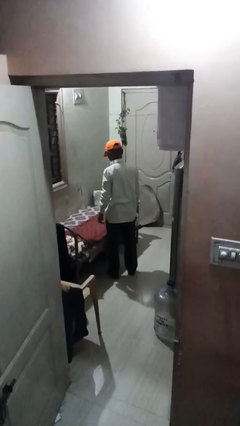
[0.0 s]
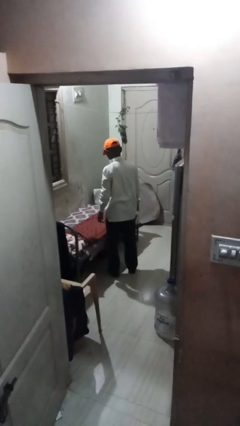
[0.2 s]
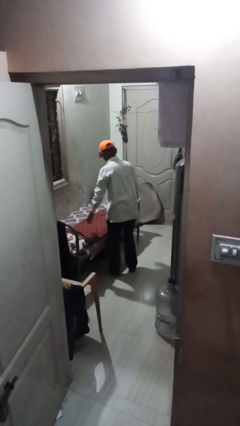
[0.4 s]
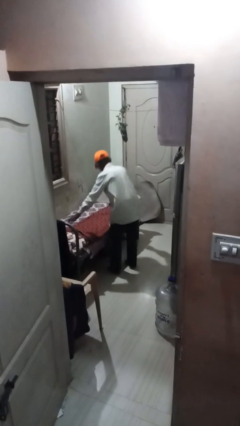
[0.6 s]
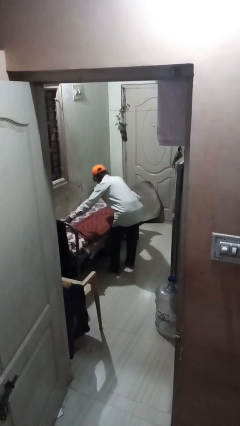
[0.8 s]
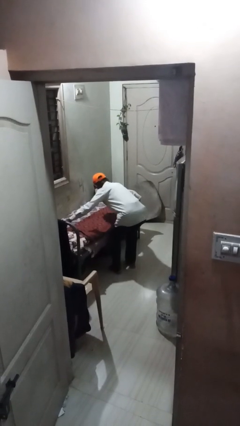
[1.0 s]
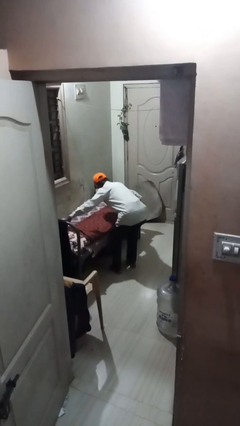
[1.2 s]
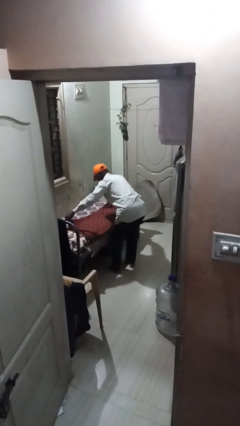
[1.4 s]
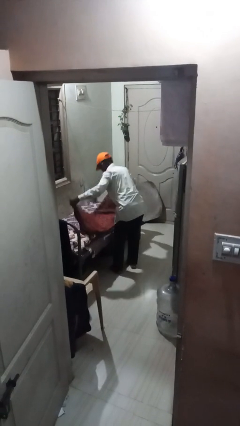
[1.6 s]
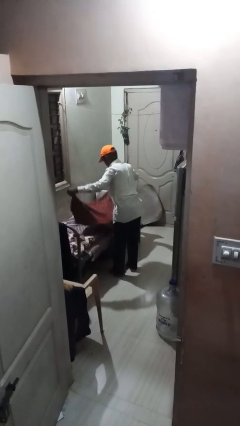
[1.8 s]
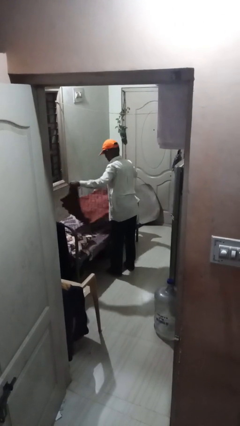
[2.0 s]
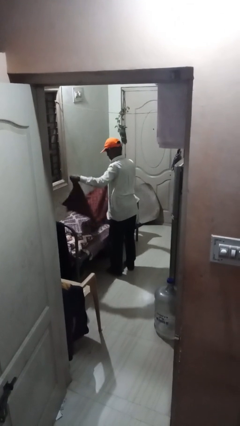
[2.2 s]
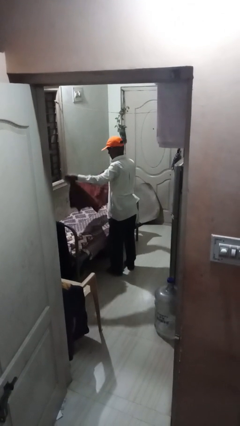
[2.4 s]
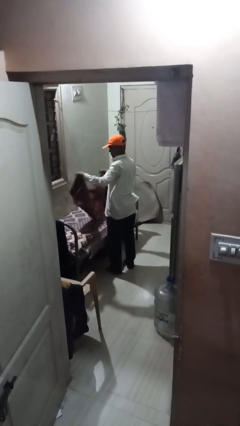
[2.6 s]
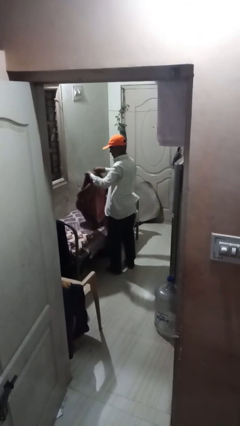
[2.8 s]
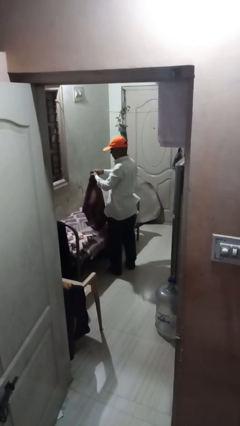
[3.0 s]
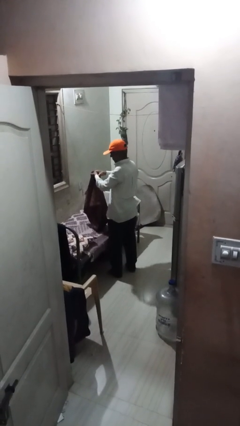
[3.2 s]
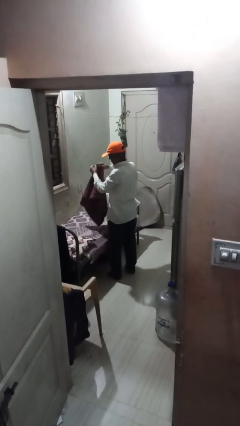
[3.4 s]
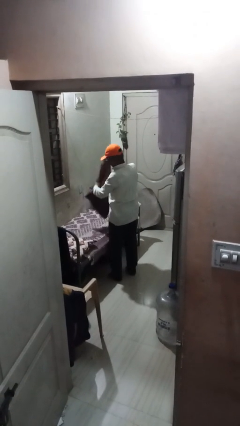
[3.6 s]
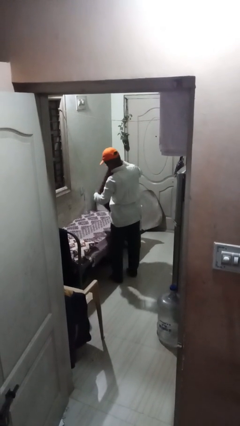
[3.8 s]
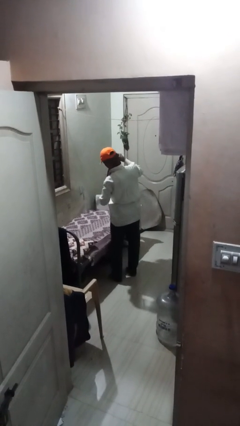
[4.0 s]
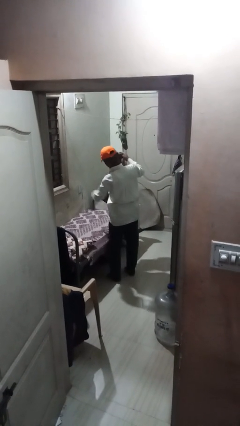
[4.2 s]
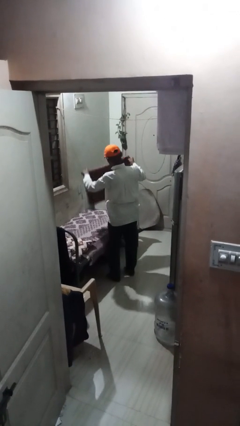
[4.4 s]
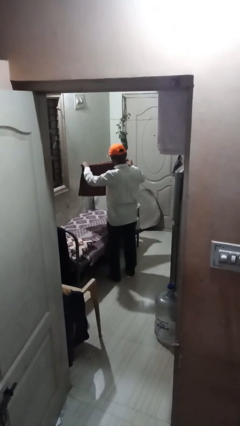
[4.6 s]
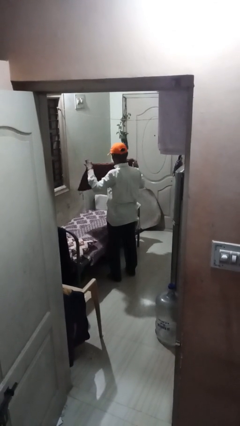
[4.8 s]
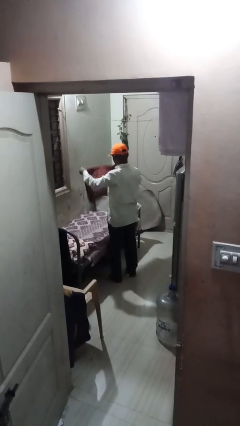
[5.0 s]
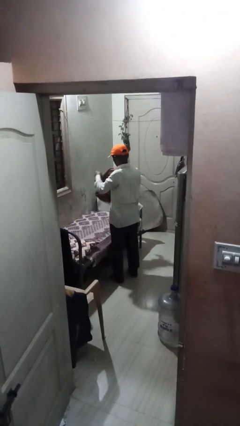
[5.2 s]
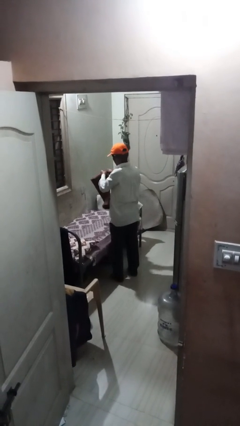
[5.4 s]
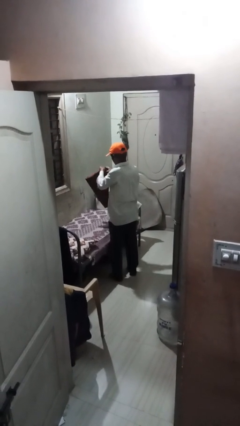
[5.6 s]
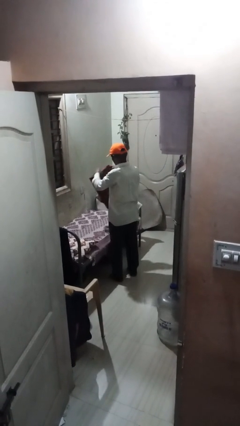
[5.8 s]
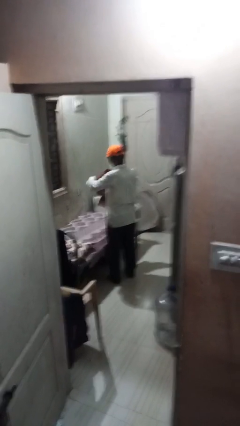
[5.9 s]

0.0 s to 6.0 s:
person folds blanket

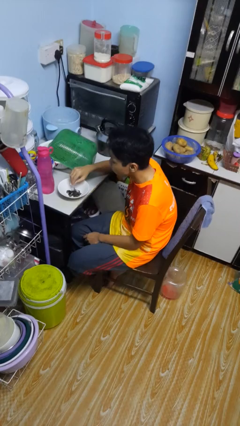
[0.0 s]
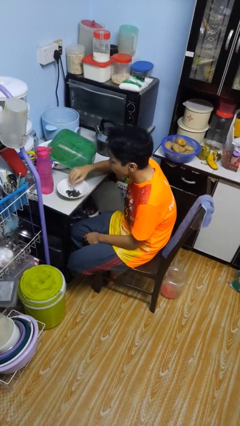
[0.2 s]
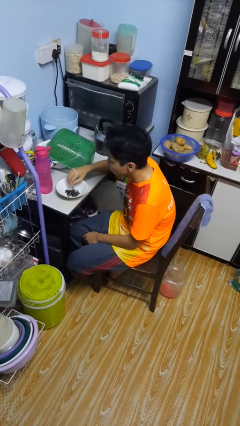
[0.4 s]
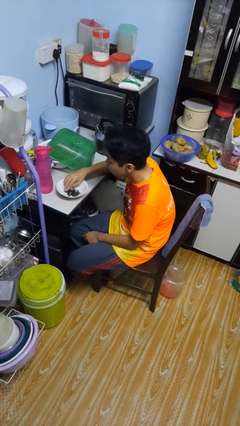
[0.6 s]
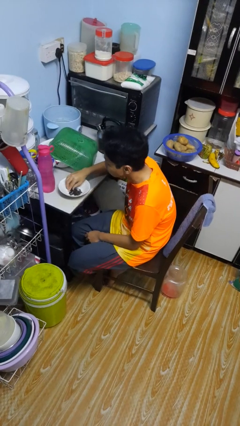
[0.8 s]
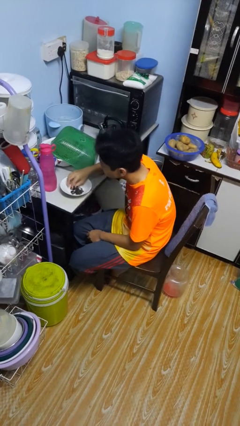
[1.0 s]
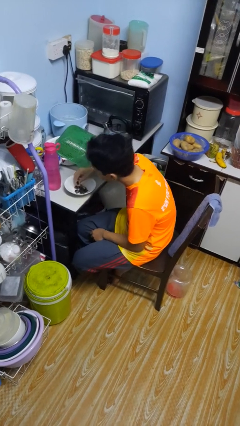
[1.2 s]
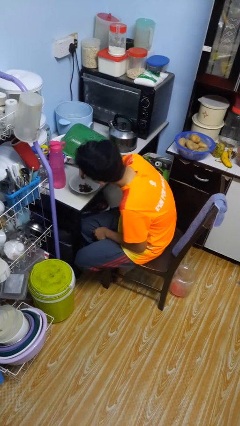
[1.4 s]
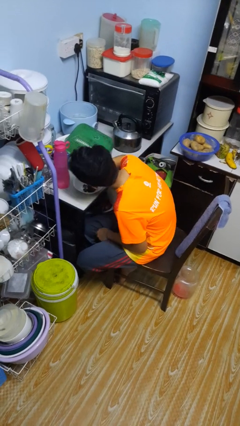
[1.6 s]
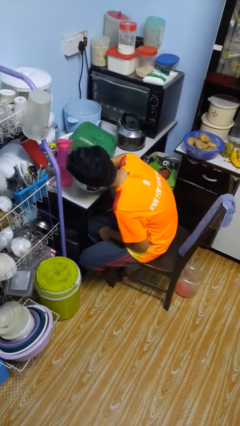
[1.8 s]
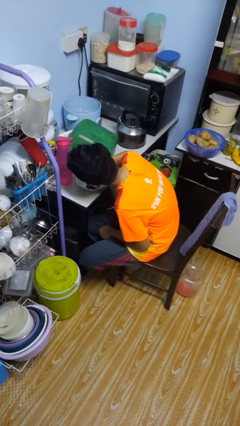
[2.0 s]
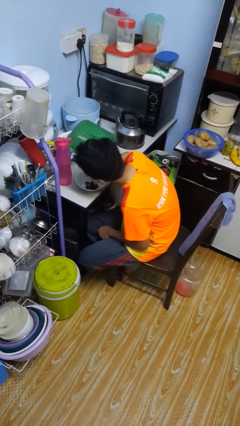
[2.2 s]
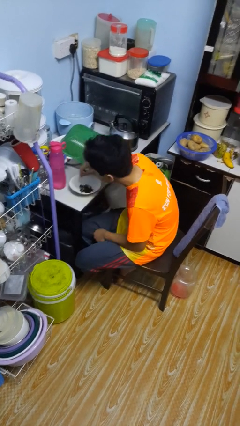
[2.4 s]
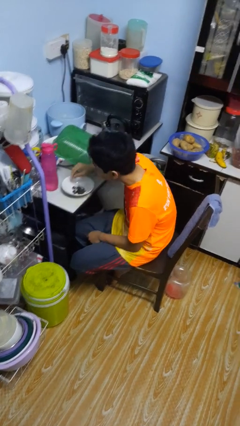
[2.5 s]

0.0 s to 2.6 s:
person eats with hands

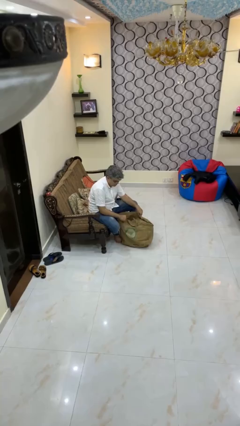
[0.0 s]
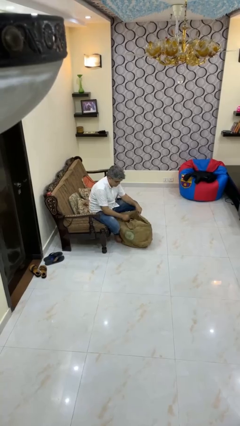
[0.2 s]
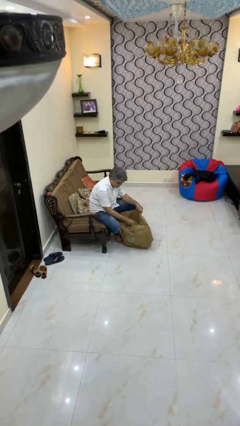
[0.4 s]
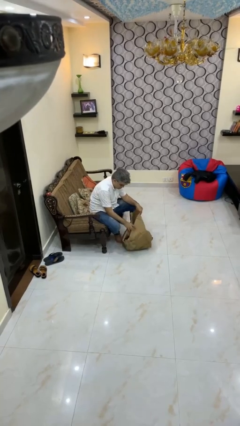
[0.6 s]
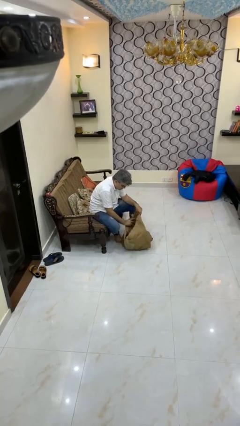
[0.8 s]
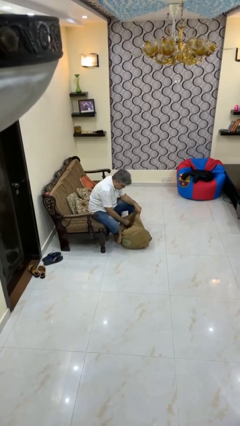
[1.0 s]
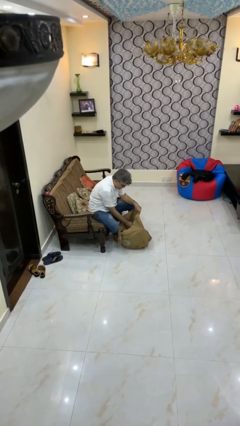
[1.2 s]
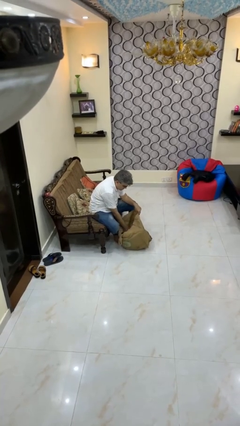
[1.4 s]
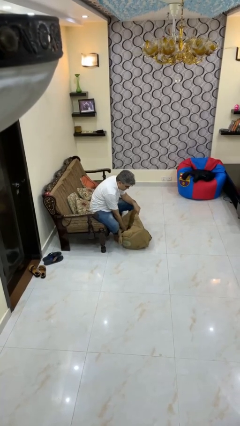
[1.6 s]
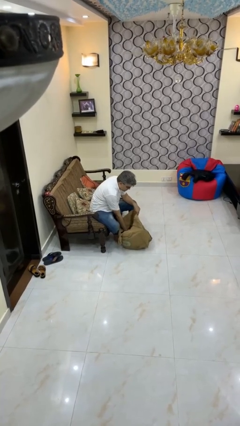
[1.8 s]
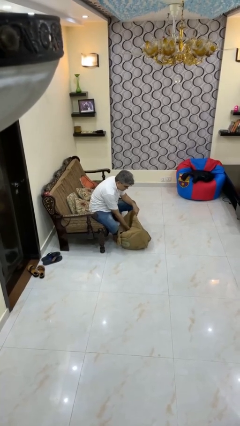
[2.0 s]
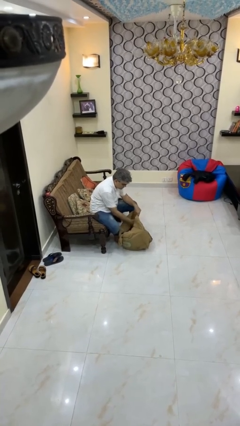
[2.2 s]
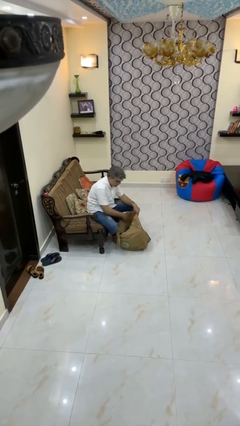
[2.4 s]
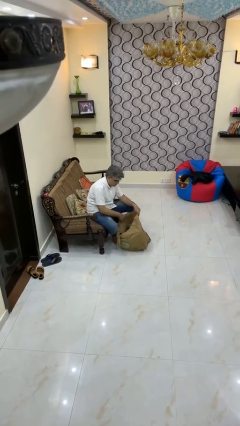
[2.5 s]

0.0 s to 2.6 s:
person searches in bag

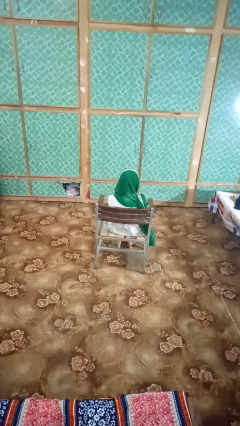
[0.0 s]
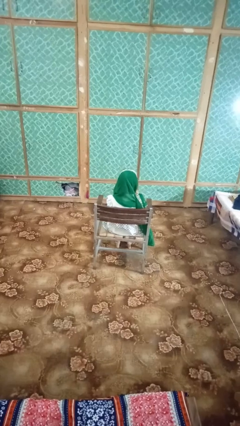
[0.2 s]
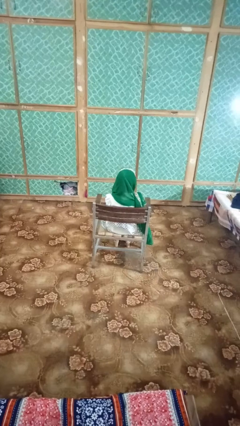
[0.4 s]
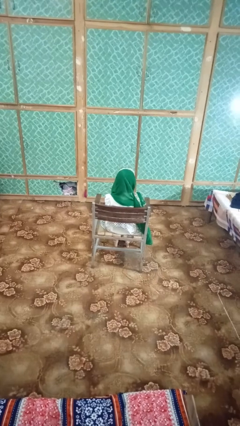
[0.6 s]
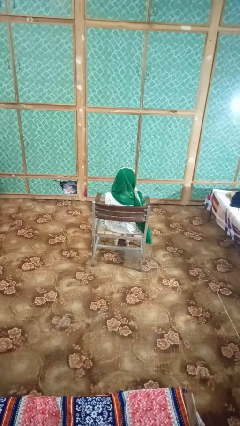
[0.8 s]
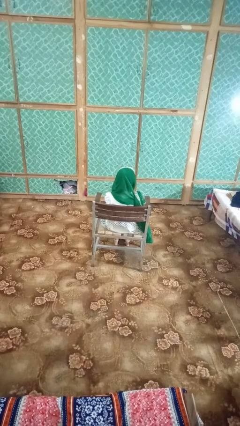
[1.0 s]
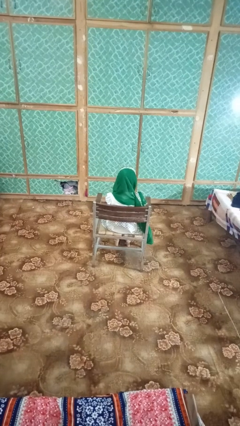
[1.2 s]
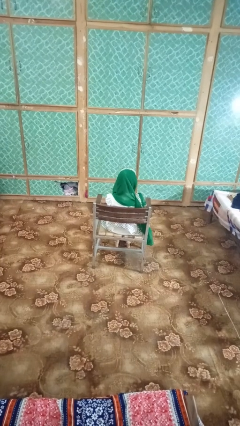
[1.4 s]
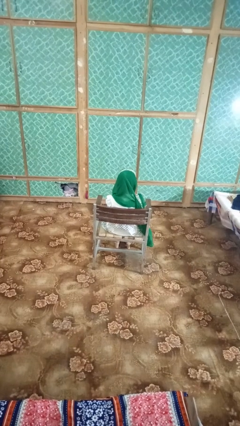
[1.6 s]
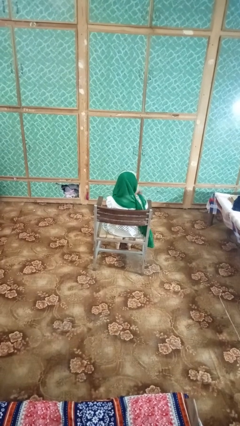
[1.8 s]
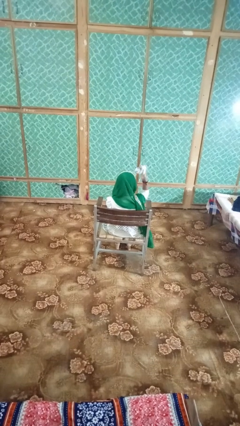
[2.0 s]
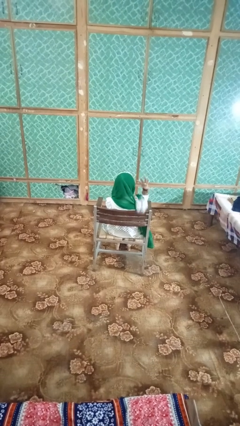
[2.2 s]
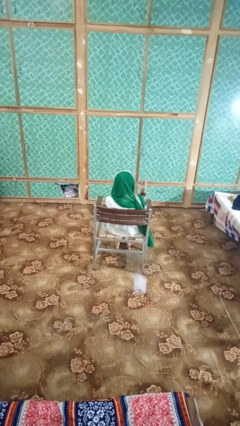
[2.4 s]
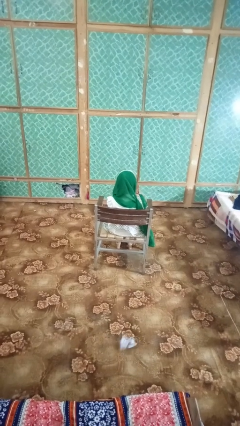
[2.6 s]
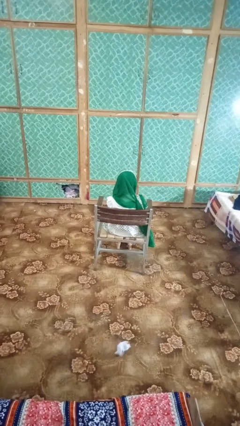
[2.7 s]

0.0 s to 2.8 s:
person crumples paper

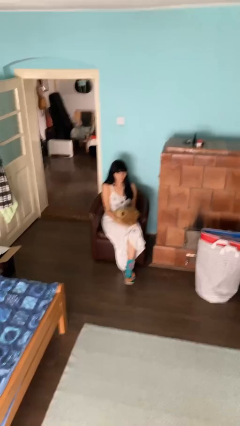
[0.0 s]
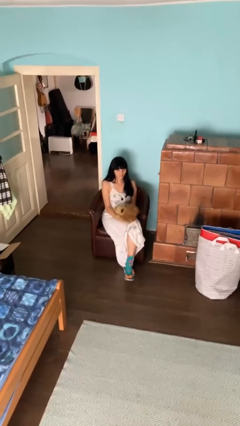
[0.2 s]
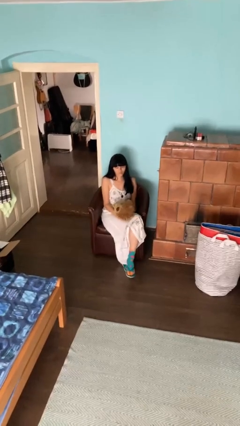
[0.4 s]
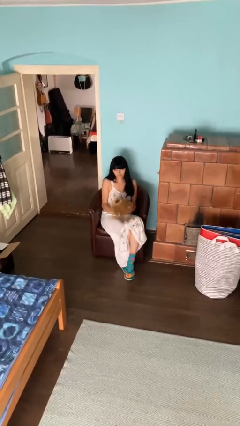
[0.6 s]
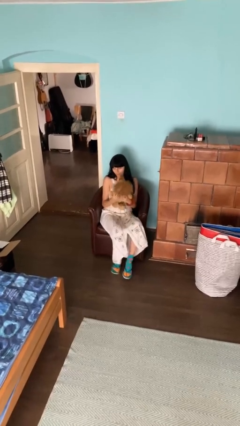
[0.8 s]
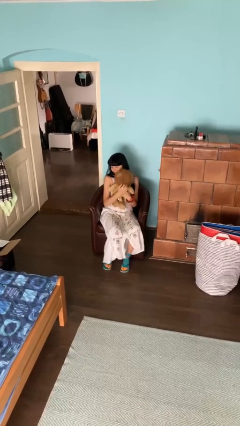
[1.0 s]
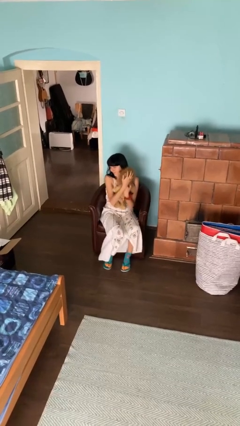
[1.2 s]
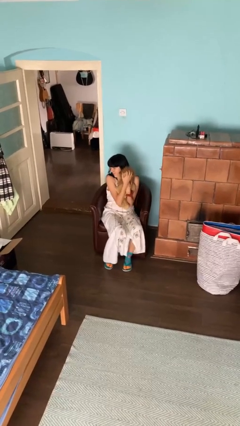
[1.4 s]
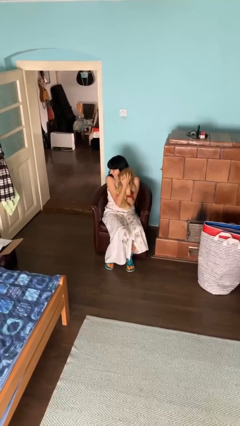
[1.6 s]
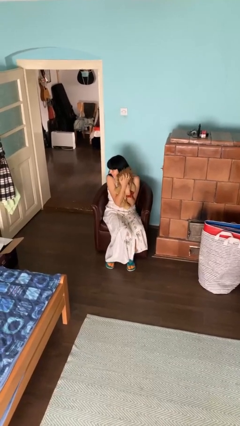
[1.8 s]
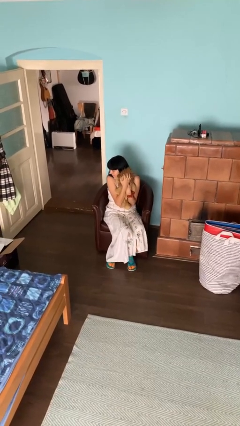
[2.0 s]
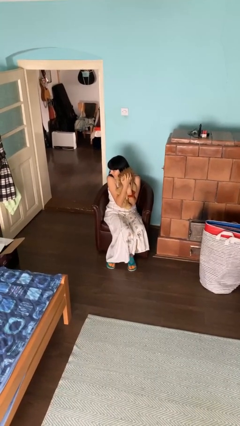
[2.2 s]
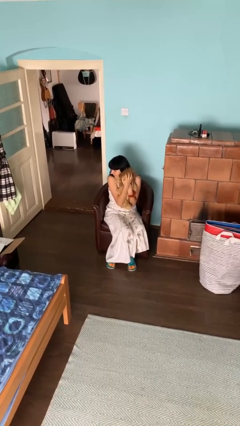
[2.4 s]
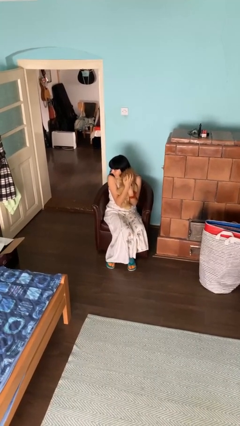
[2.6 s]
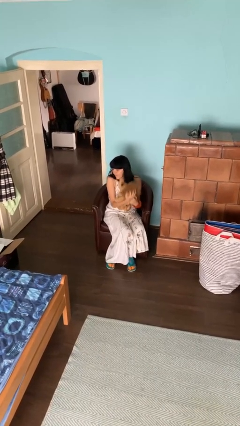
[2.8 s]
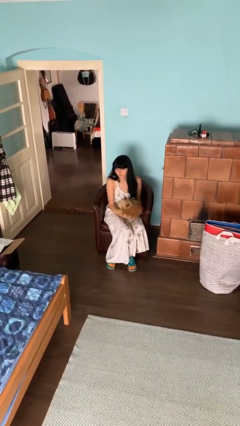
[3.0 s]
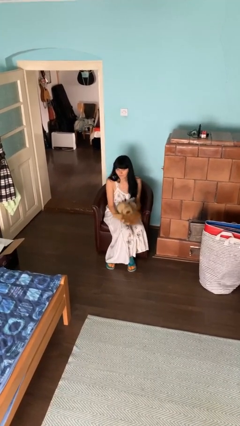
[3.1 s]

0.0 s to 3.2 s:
person hugs stuffed animal

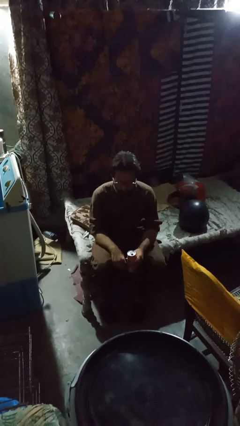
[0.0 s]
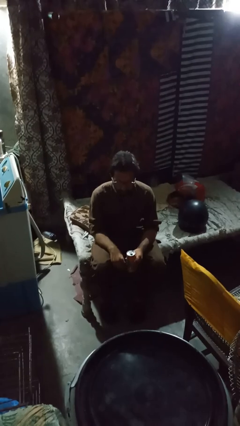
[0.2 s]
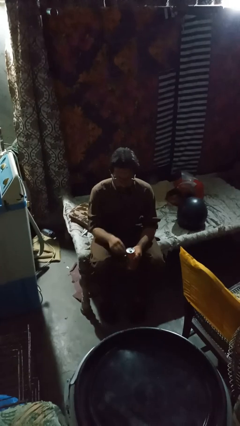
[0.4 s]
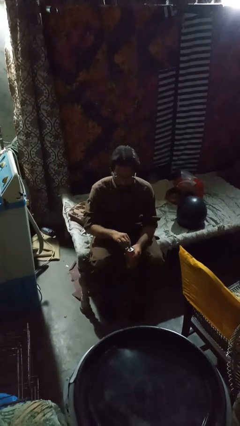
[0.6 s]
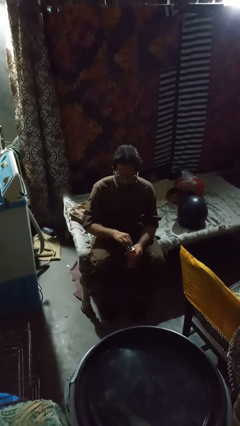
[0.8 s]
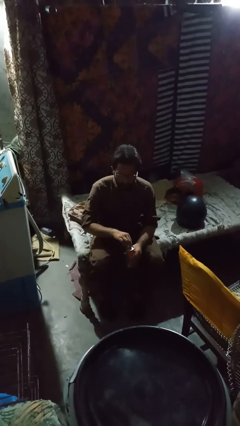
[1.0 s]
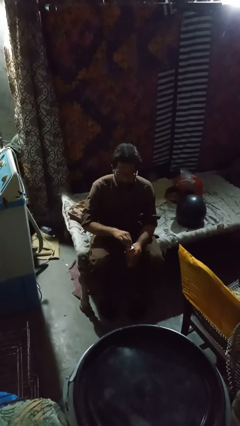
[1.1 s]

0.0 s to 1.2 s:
person opens can with can opener
